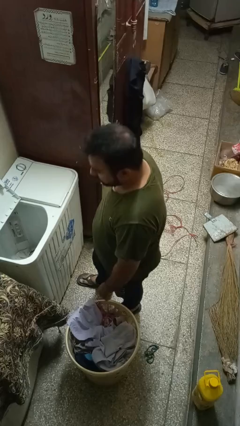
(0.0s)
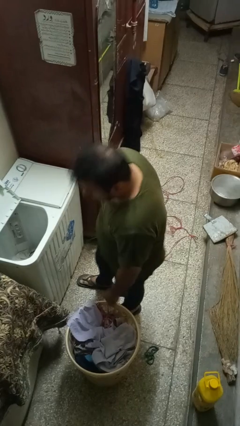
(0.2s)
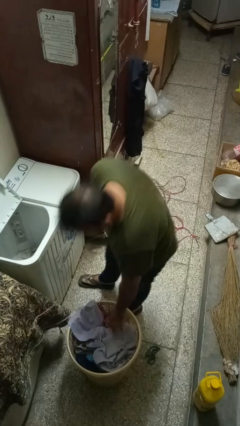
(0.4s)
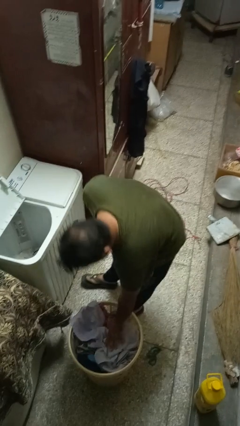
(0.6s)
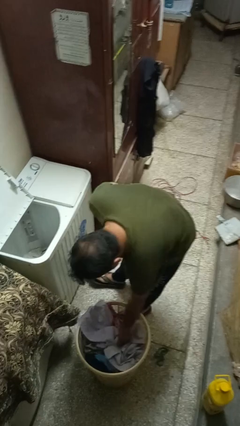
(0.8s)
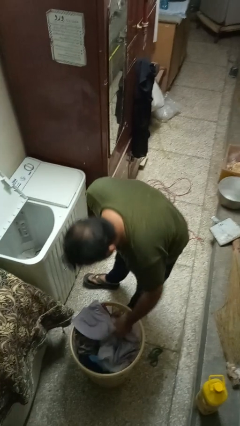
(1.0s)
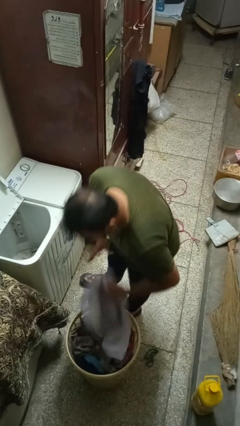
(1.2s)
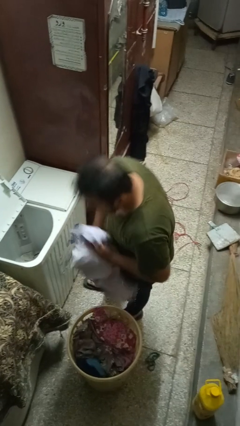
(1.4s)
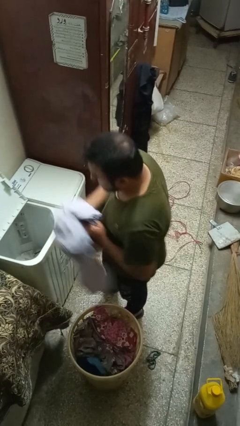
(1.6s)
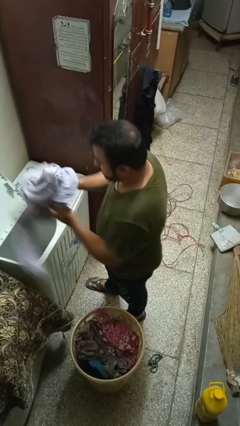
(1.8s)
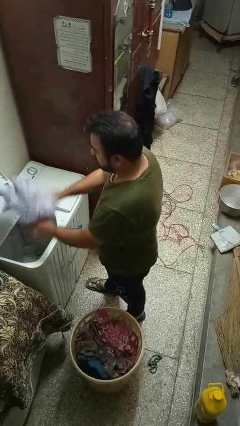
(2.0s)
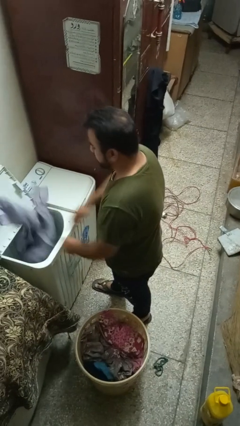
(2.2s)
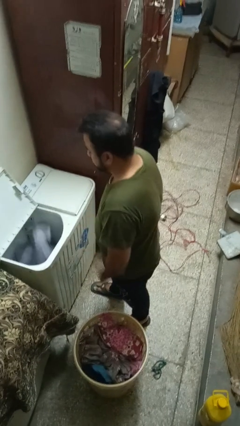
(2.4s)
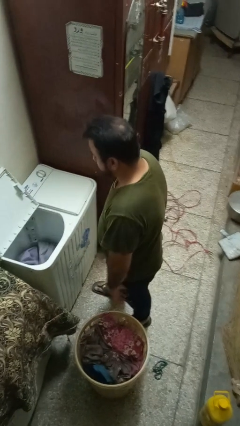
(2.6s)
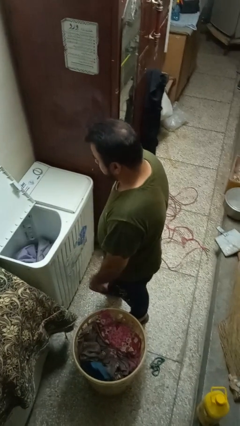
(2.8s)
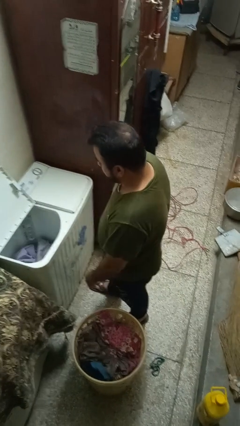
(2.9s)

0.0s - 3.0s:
person loads clotheswasher

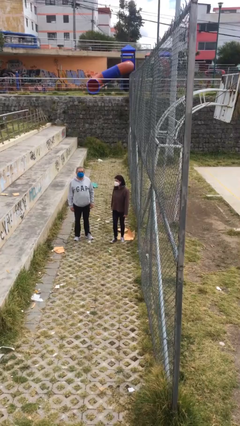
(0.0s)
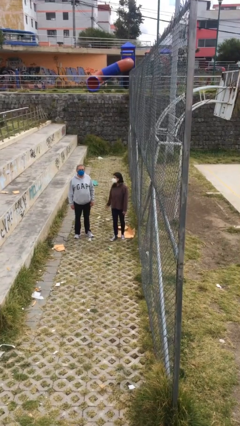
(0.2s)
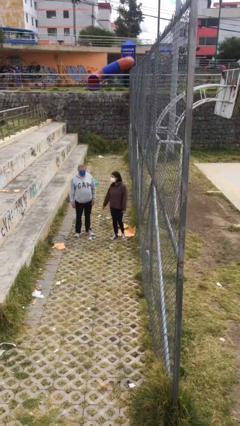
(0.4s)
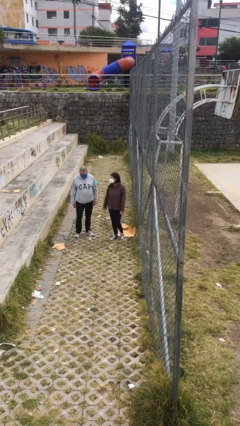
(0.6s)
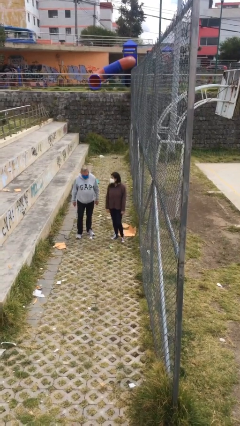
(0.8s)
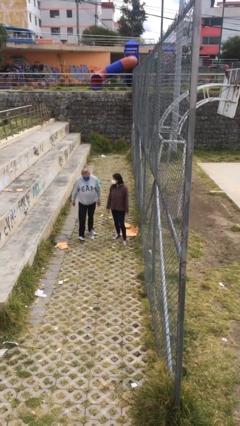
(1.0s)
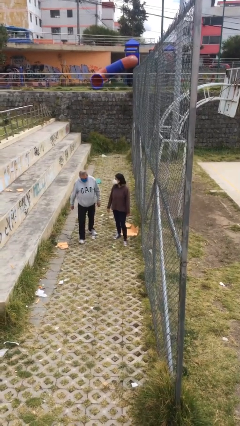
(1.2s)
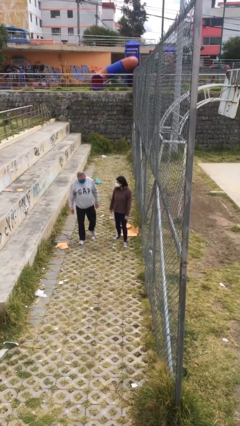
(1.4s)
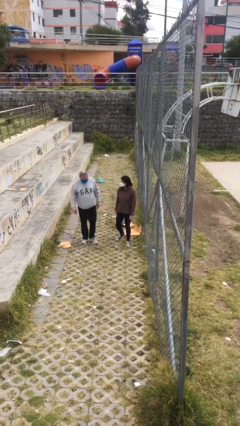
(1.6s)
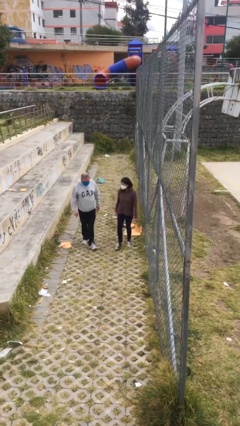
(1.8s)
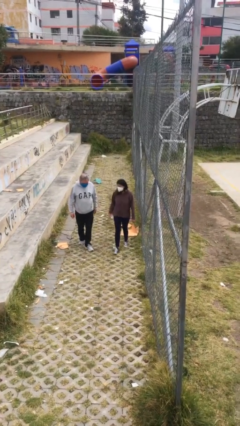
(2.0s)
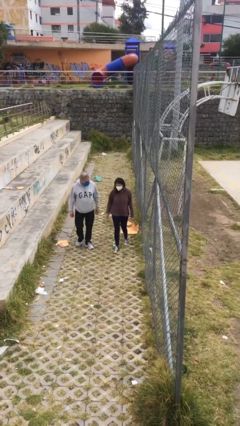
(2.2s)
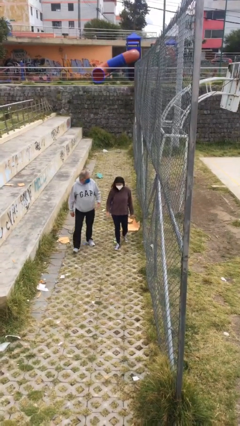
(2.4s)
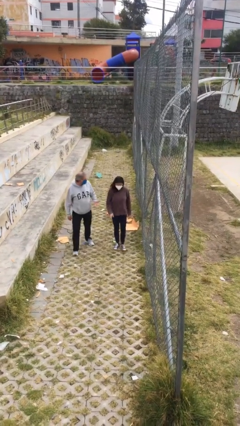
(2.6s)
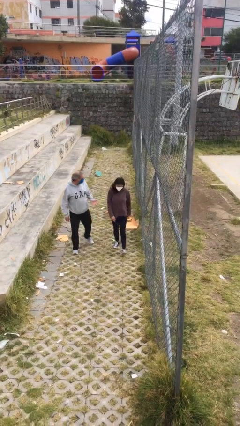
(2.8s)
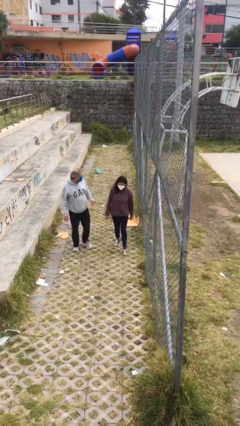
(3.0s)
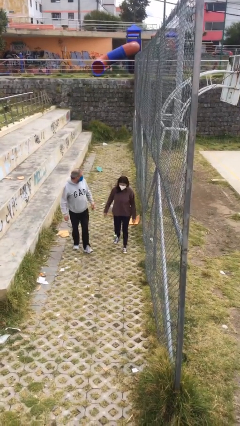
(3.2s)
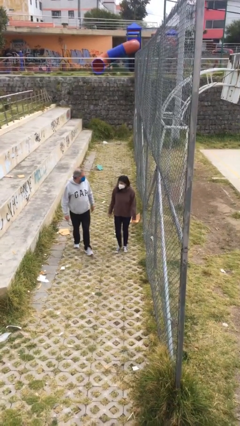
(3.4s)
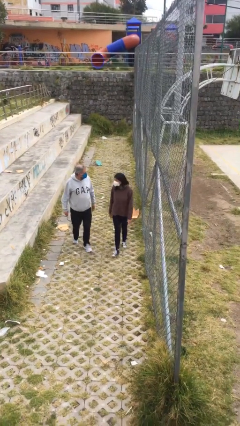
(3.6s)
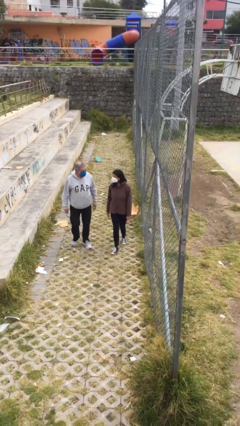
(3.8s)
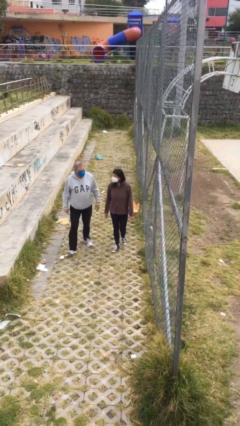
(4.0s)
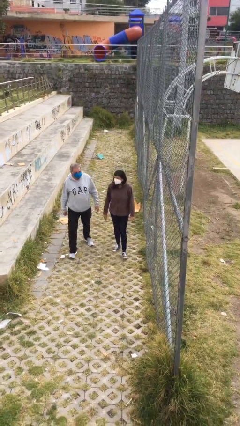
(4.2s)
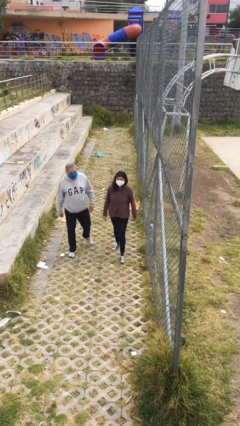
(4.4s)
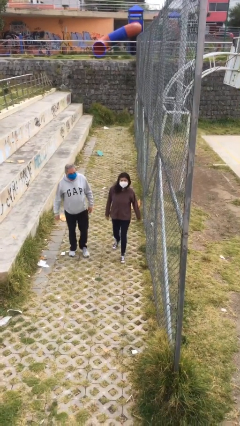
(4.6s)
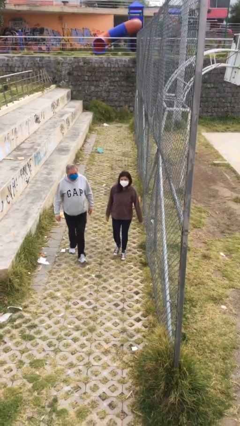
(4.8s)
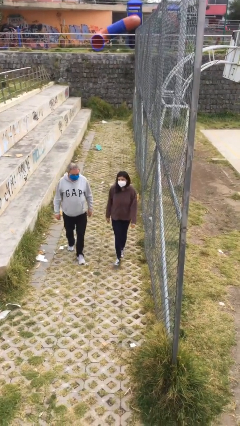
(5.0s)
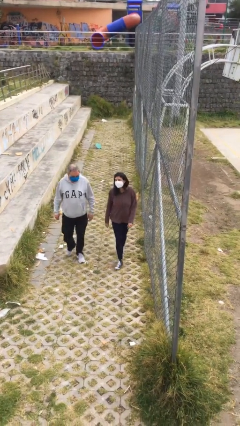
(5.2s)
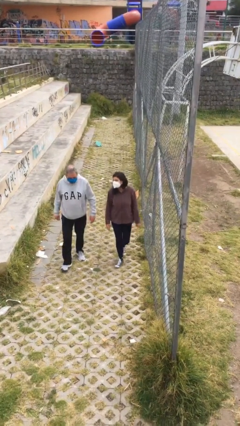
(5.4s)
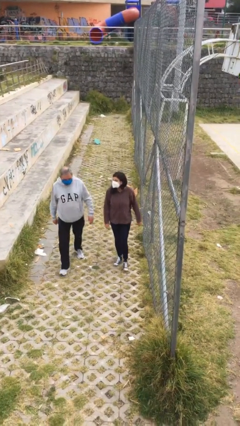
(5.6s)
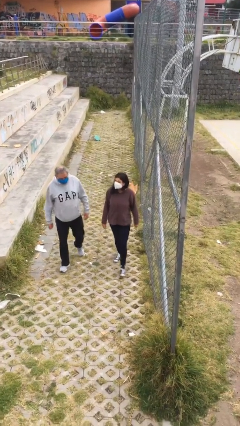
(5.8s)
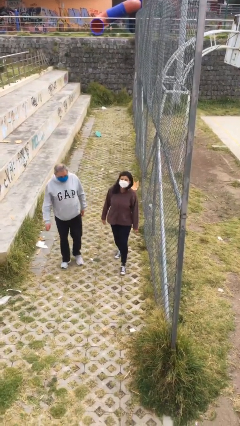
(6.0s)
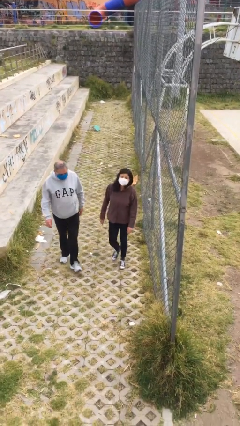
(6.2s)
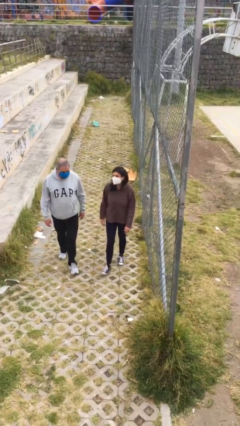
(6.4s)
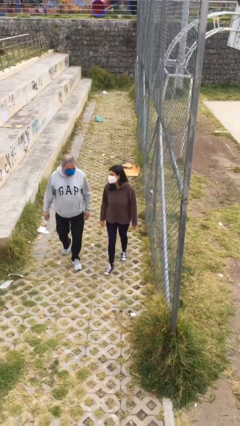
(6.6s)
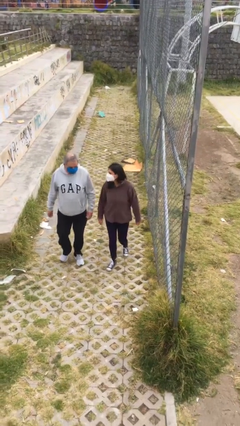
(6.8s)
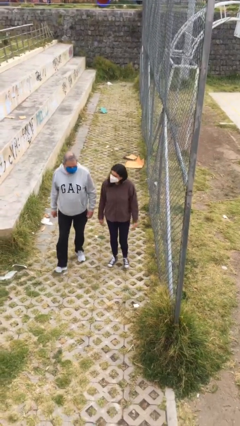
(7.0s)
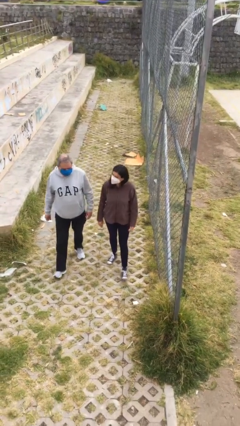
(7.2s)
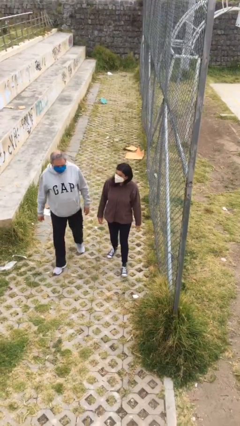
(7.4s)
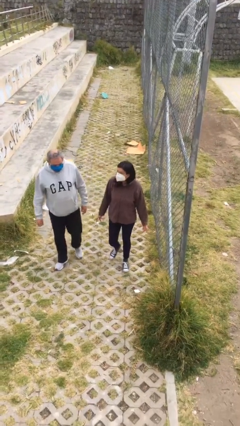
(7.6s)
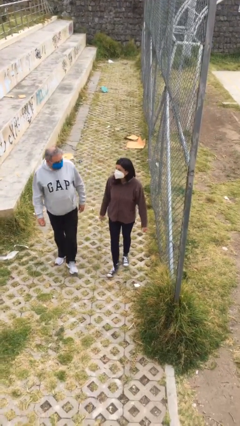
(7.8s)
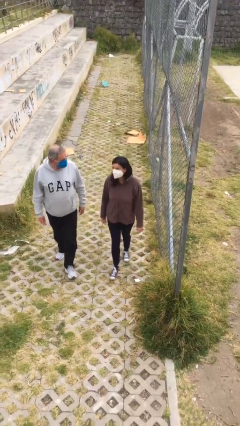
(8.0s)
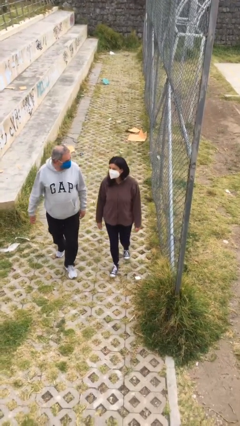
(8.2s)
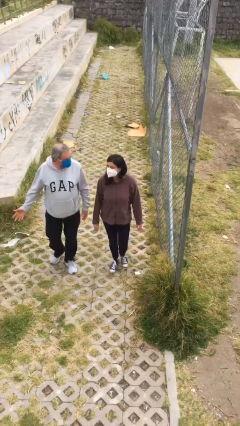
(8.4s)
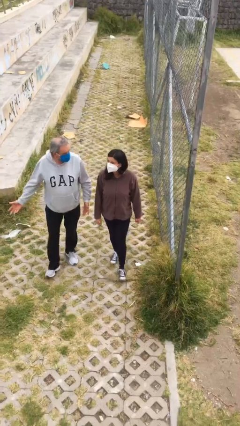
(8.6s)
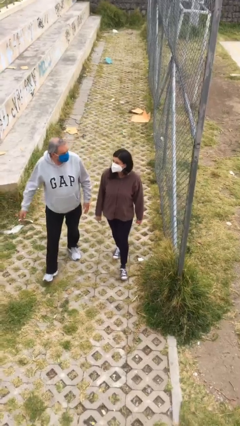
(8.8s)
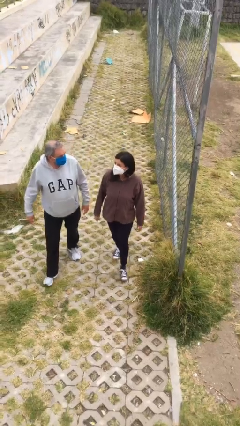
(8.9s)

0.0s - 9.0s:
person talks to person

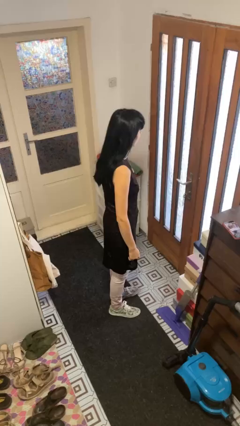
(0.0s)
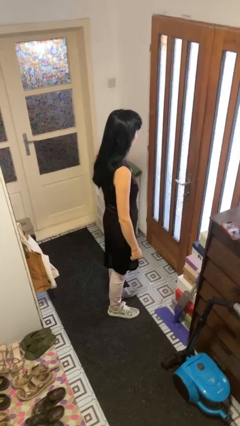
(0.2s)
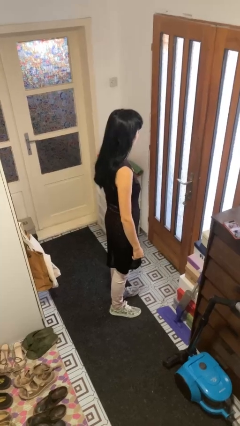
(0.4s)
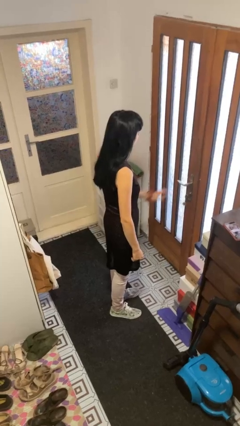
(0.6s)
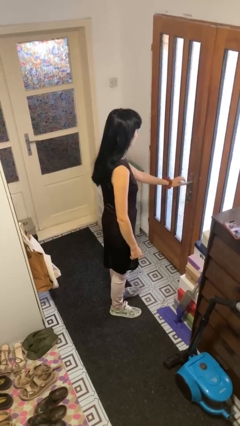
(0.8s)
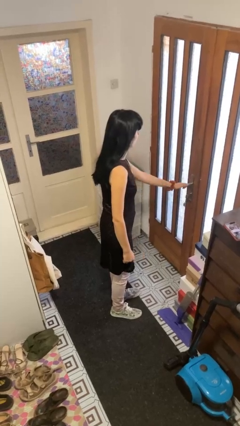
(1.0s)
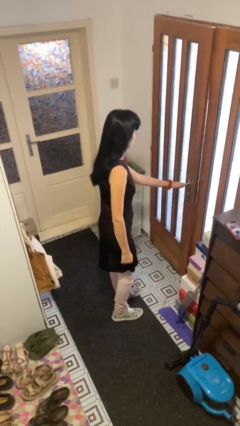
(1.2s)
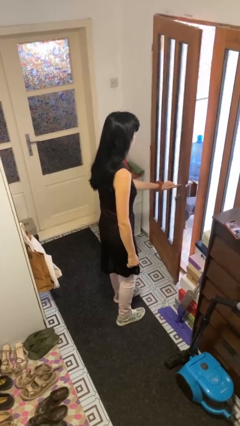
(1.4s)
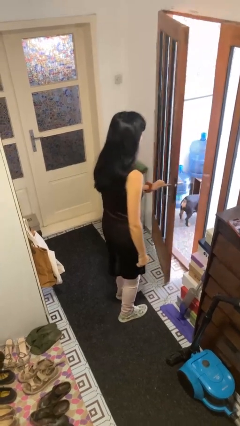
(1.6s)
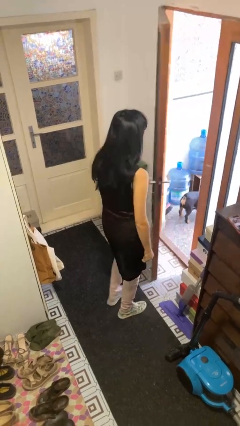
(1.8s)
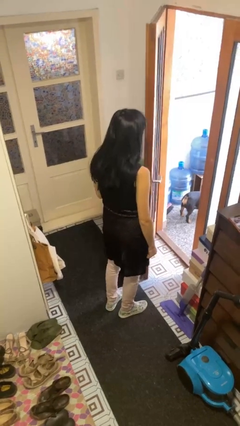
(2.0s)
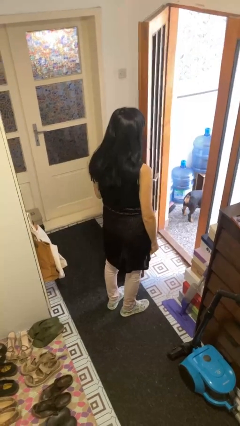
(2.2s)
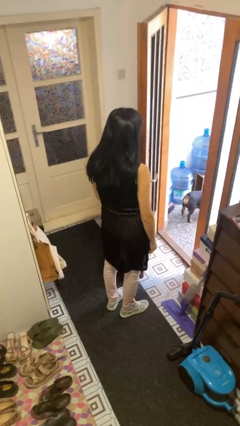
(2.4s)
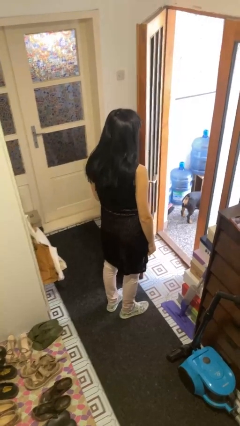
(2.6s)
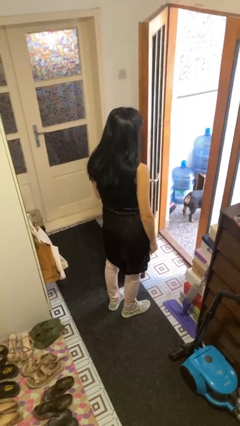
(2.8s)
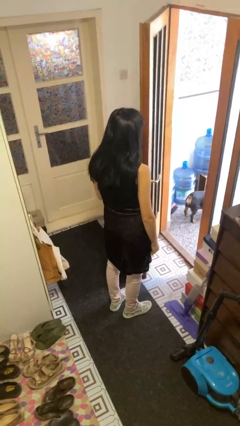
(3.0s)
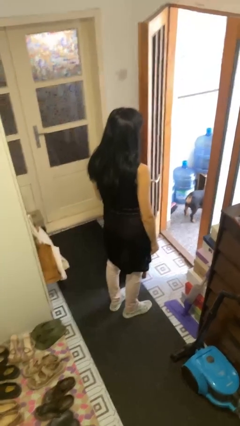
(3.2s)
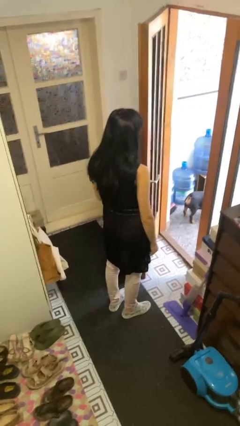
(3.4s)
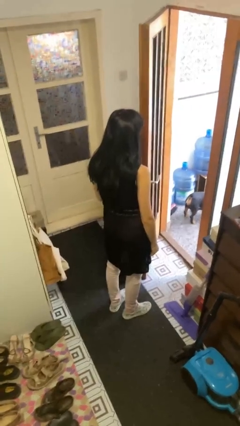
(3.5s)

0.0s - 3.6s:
person opens facility door

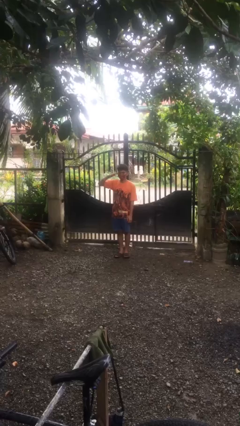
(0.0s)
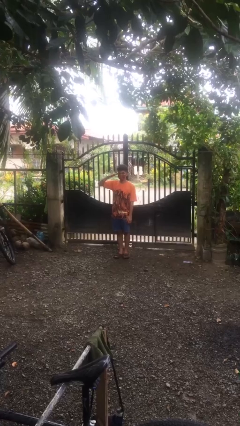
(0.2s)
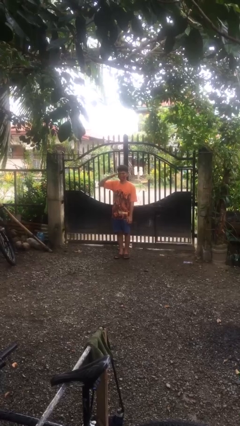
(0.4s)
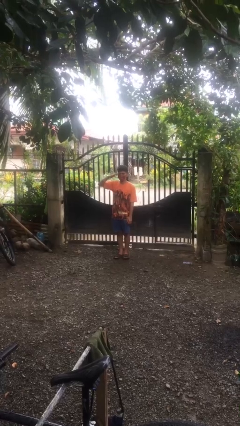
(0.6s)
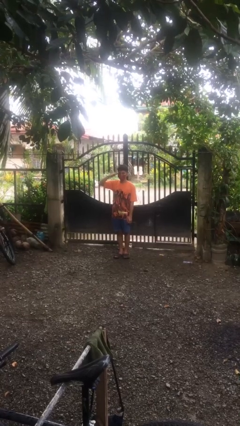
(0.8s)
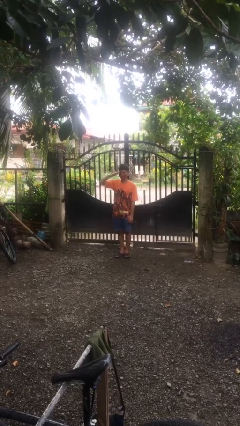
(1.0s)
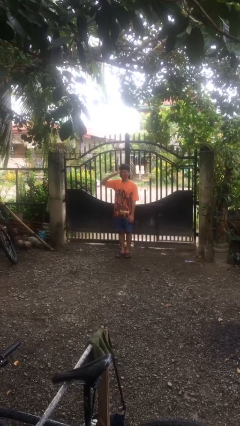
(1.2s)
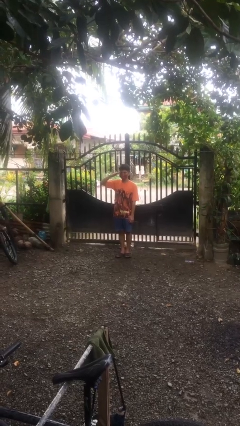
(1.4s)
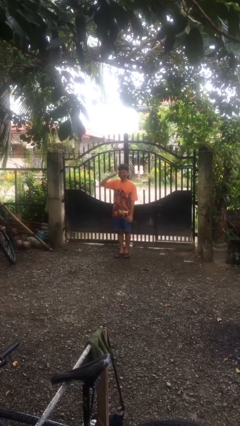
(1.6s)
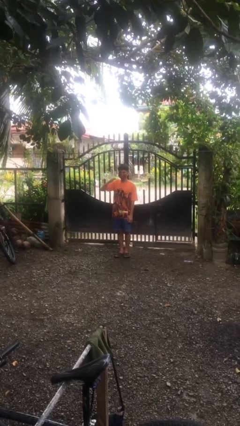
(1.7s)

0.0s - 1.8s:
person salutes

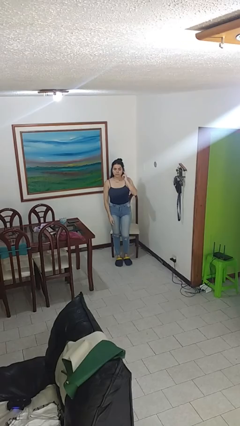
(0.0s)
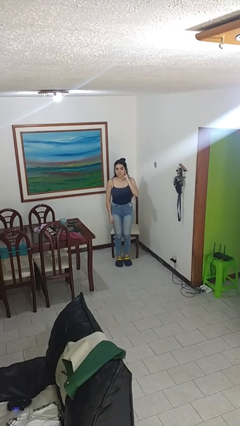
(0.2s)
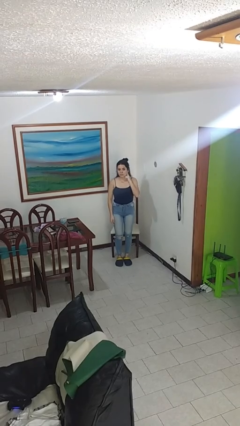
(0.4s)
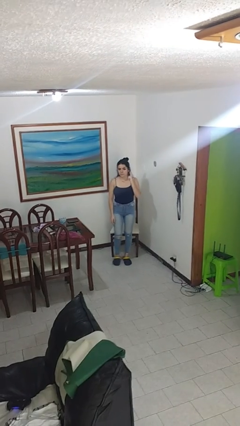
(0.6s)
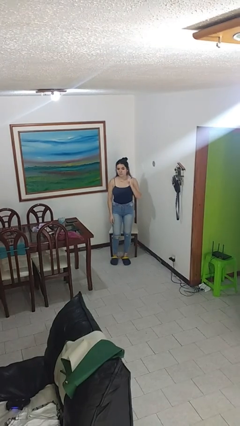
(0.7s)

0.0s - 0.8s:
person gestures listen closely
